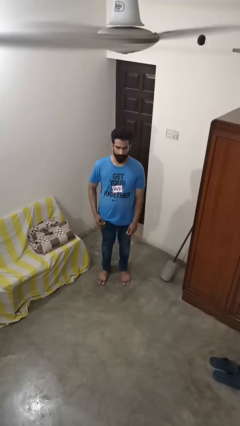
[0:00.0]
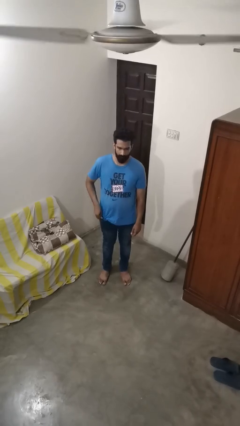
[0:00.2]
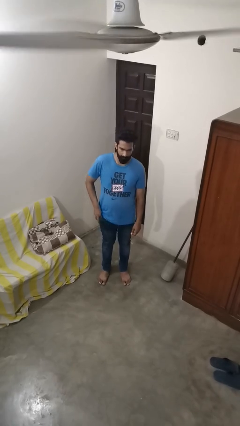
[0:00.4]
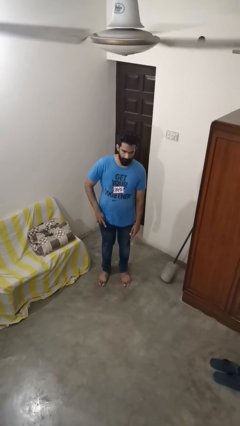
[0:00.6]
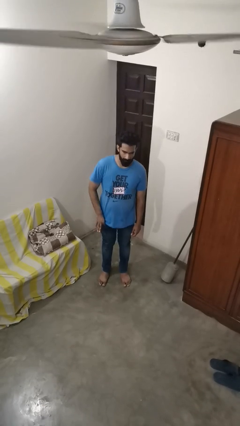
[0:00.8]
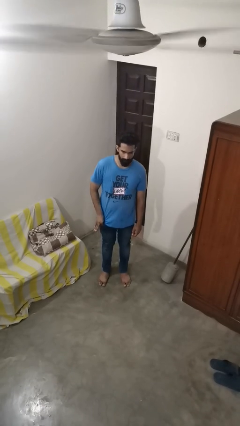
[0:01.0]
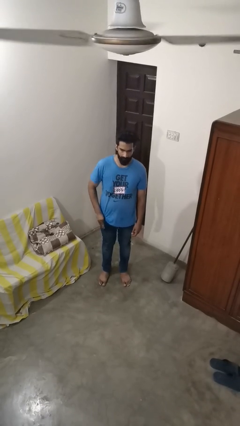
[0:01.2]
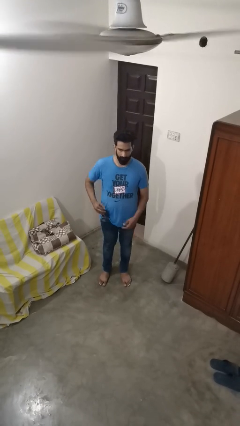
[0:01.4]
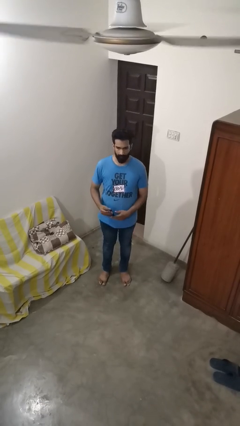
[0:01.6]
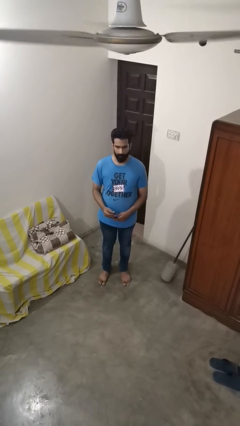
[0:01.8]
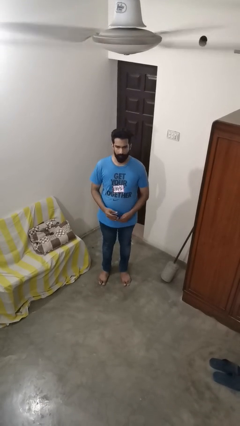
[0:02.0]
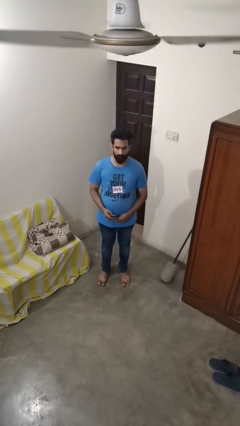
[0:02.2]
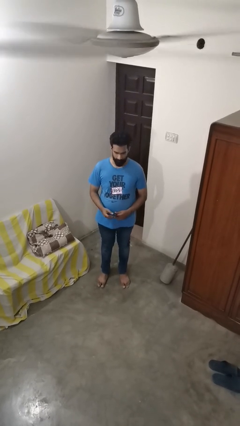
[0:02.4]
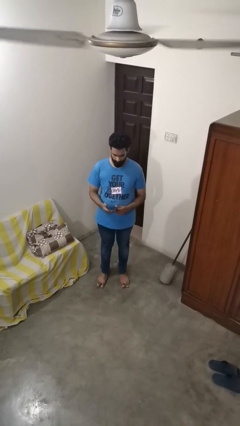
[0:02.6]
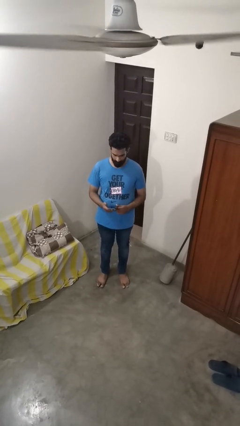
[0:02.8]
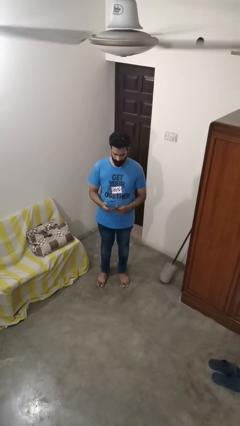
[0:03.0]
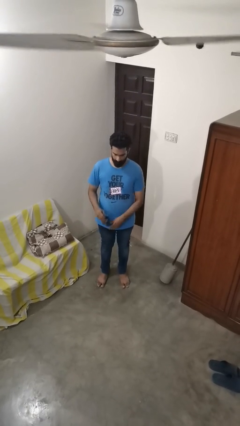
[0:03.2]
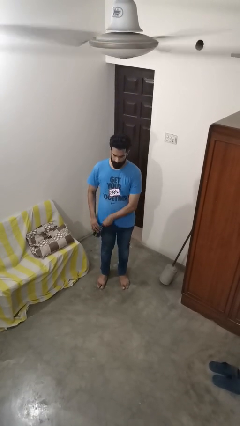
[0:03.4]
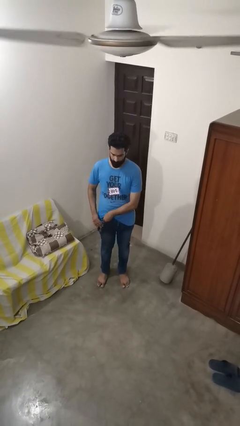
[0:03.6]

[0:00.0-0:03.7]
person takes phone from pocket

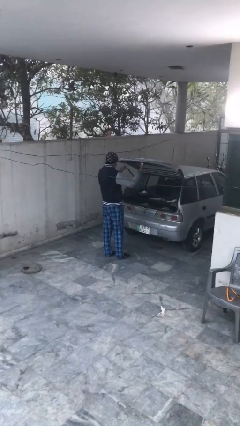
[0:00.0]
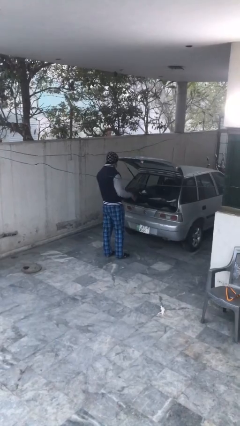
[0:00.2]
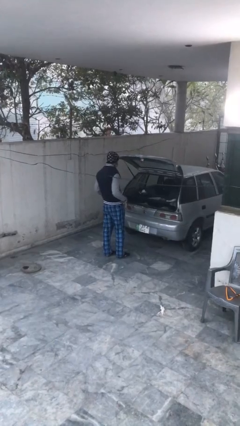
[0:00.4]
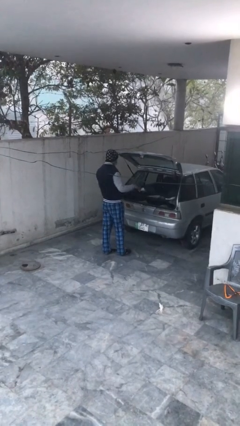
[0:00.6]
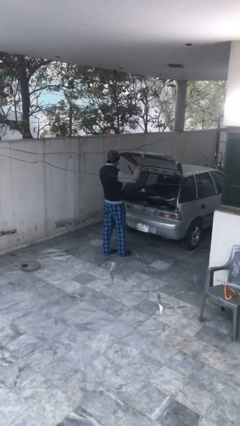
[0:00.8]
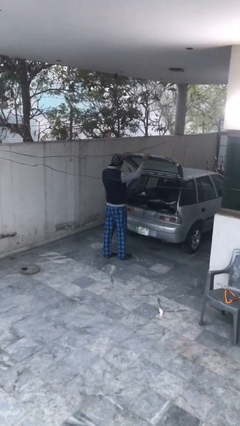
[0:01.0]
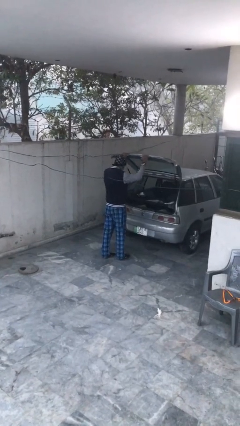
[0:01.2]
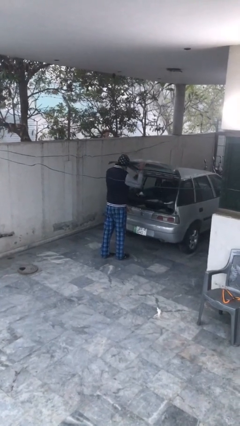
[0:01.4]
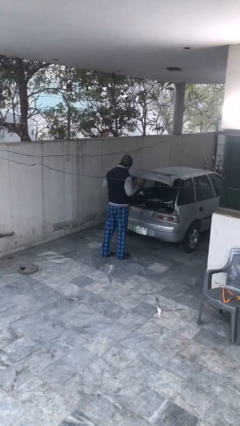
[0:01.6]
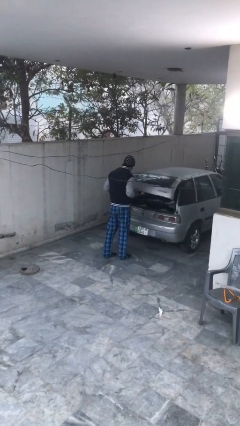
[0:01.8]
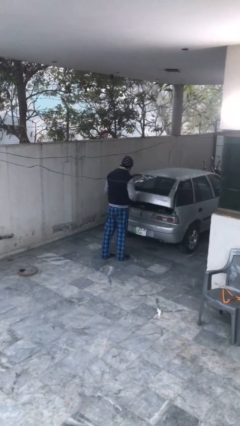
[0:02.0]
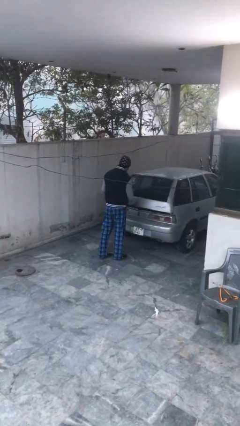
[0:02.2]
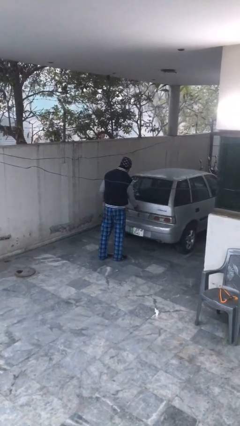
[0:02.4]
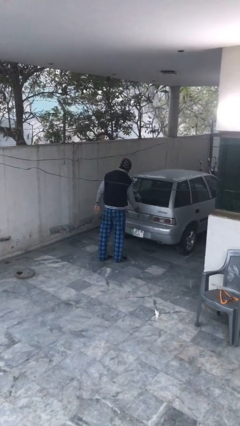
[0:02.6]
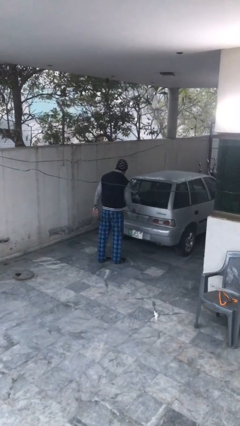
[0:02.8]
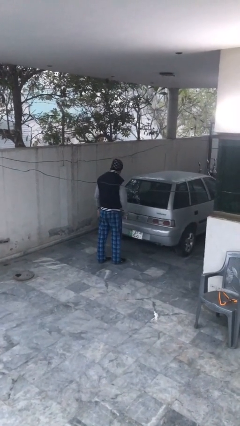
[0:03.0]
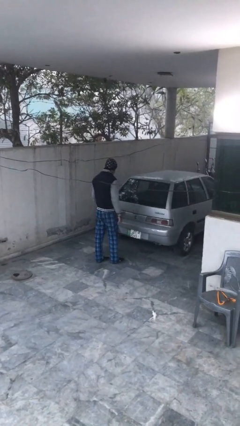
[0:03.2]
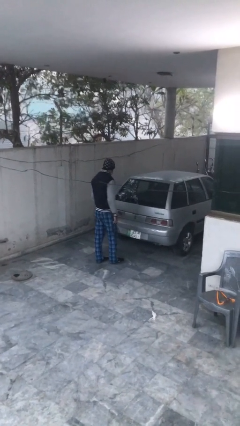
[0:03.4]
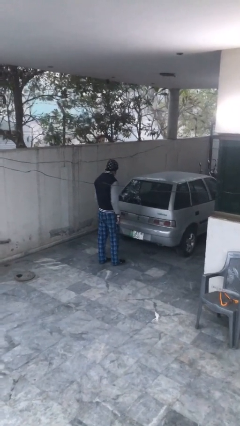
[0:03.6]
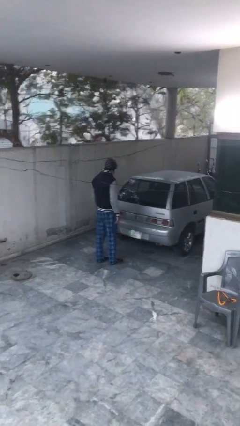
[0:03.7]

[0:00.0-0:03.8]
person closes car trunk

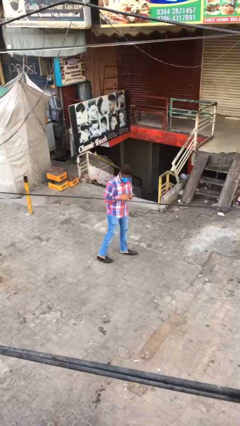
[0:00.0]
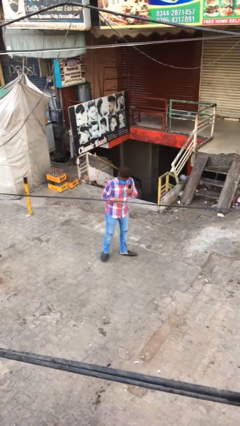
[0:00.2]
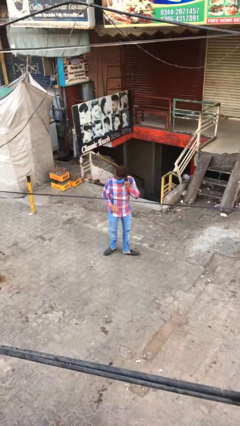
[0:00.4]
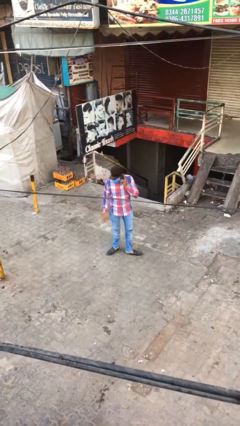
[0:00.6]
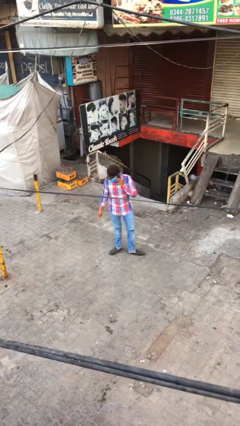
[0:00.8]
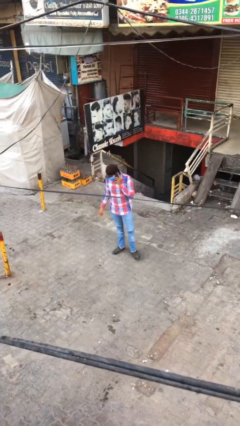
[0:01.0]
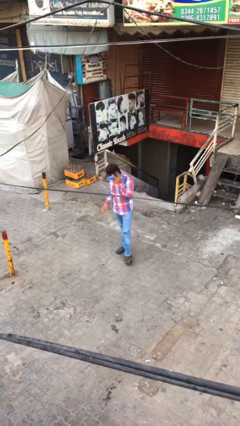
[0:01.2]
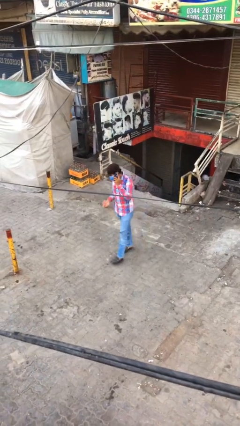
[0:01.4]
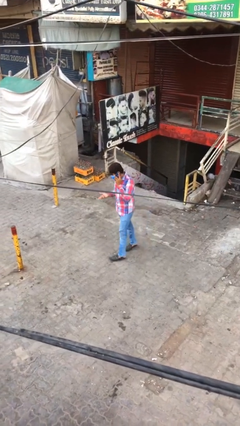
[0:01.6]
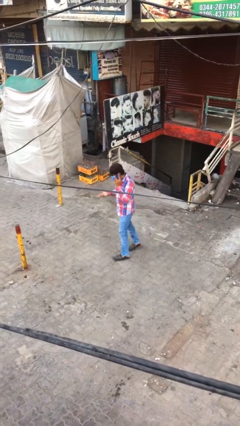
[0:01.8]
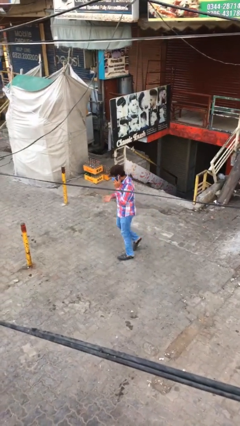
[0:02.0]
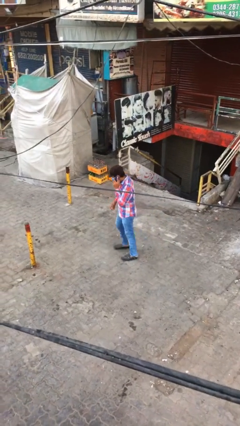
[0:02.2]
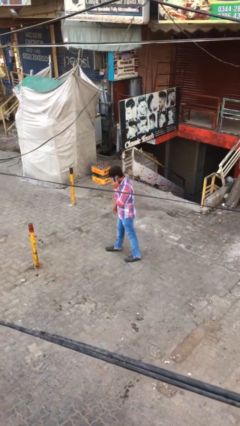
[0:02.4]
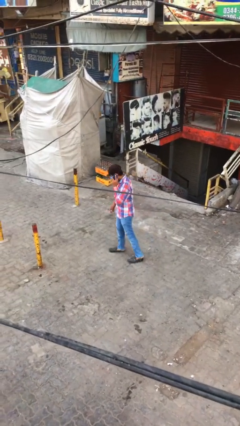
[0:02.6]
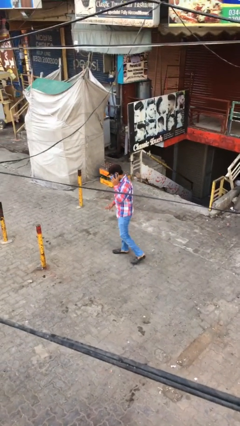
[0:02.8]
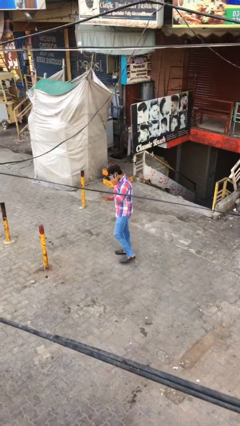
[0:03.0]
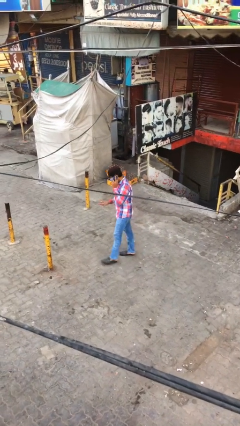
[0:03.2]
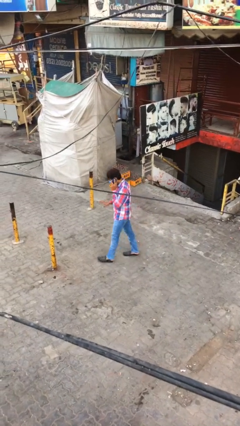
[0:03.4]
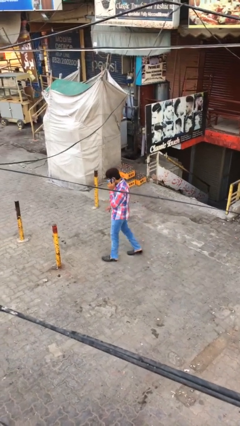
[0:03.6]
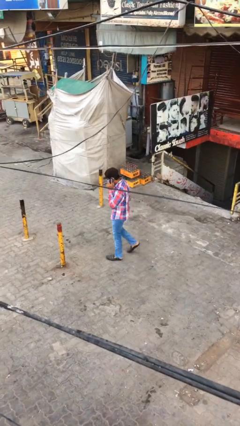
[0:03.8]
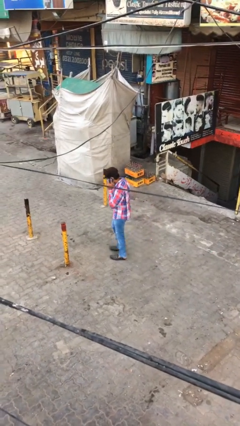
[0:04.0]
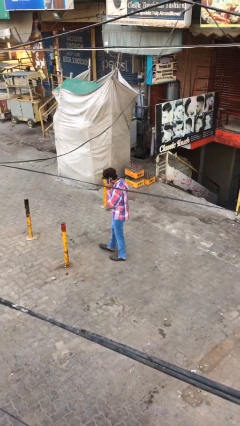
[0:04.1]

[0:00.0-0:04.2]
person talks on phone

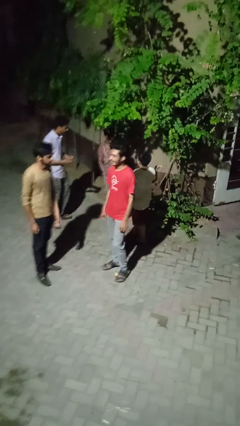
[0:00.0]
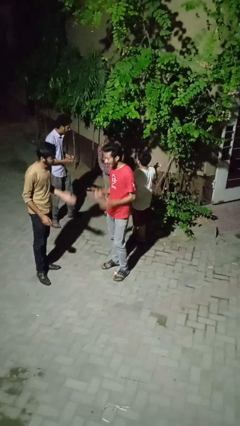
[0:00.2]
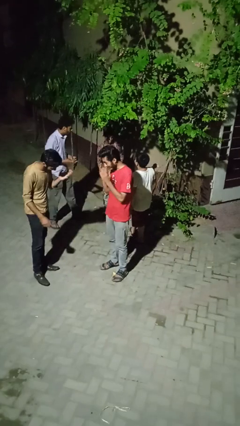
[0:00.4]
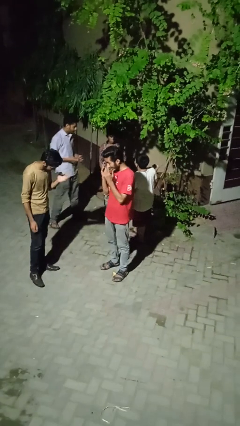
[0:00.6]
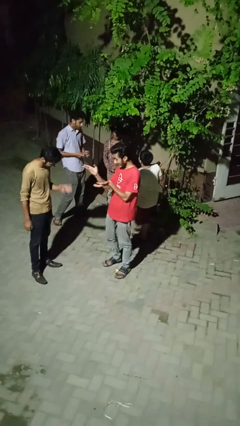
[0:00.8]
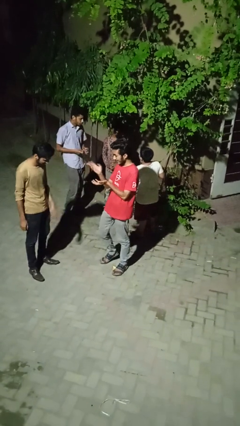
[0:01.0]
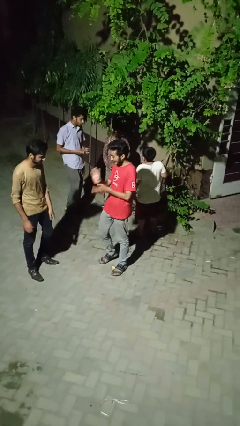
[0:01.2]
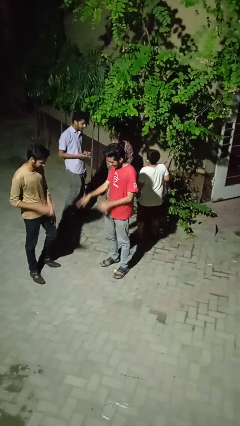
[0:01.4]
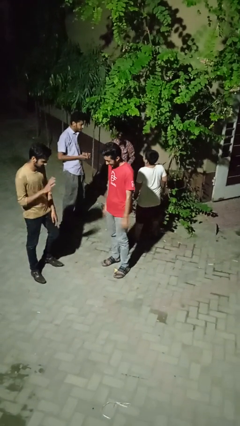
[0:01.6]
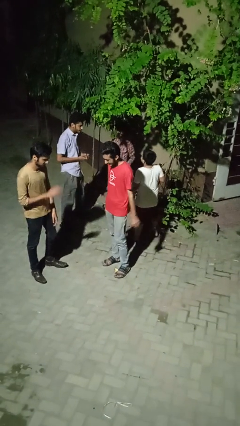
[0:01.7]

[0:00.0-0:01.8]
person laughs with person

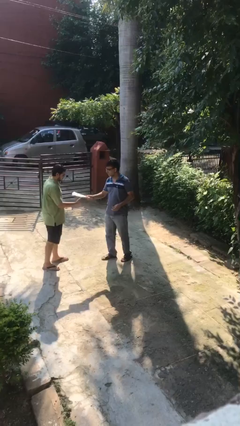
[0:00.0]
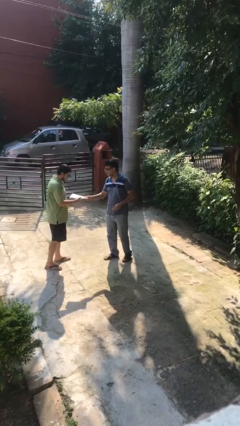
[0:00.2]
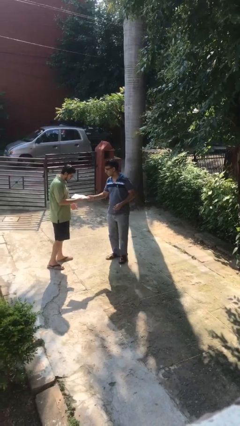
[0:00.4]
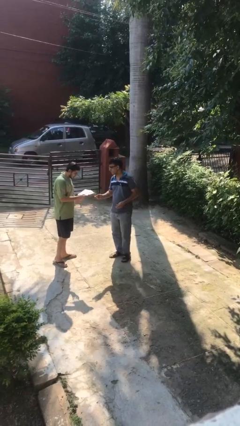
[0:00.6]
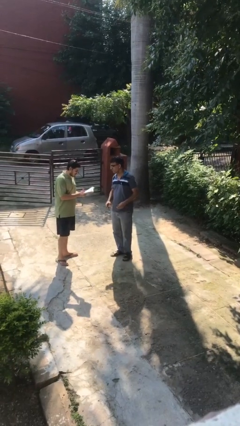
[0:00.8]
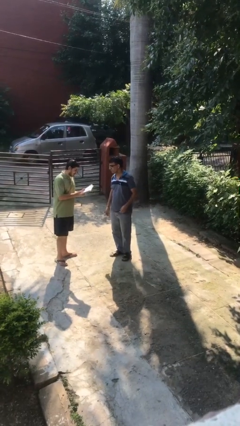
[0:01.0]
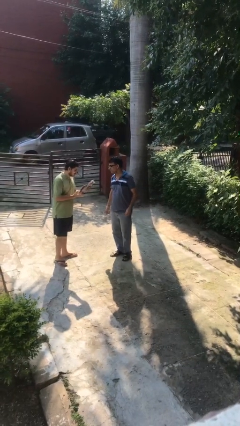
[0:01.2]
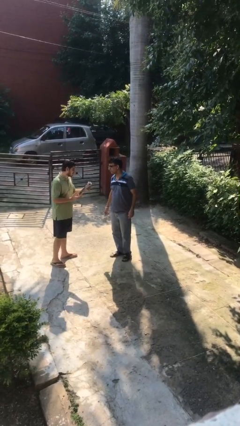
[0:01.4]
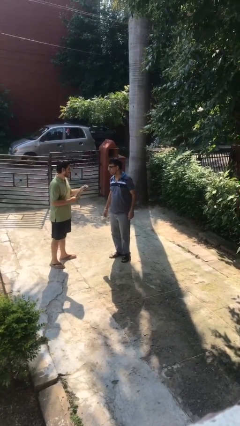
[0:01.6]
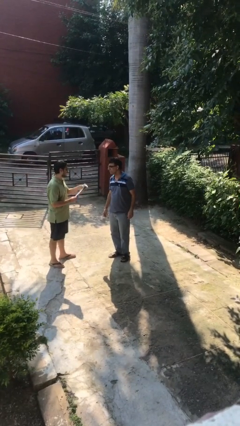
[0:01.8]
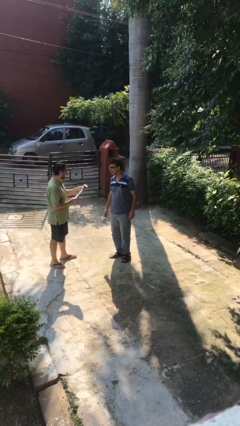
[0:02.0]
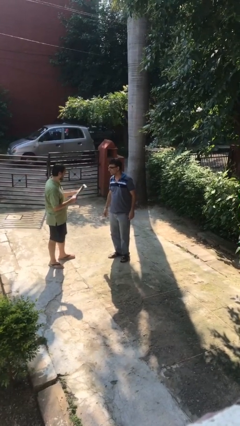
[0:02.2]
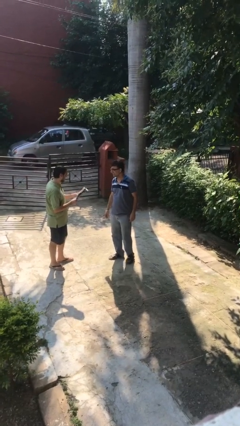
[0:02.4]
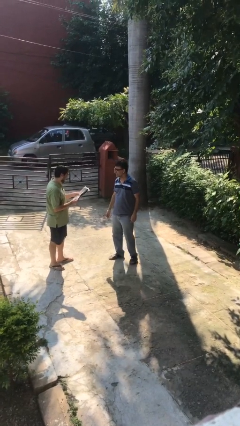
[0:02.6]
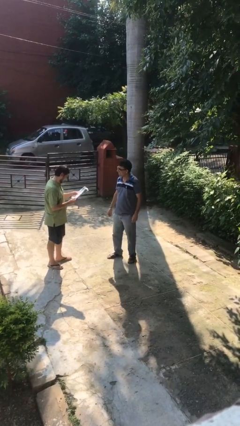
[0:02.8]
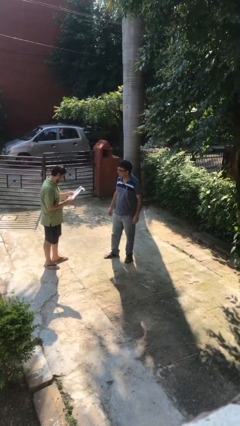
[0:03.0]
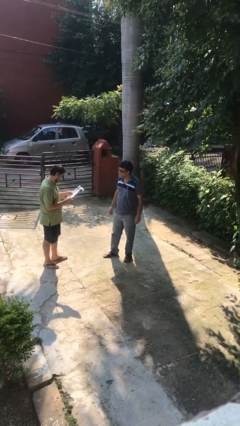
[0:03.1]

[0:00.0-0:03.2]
person transfers object to person

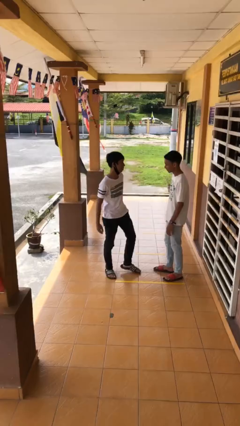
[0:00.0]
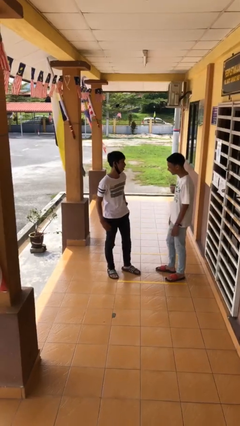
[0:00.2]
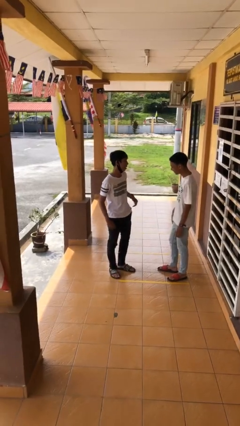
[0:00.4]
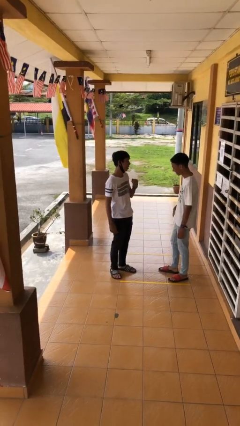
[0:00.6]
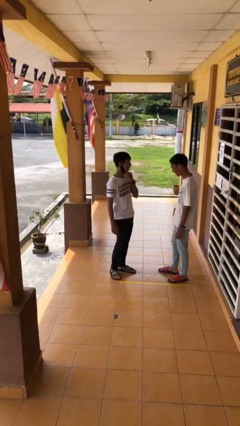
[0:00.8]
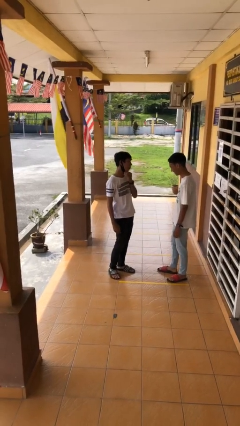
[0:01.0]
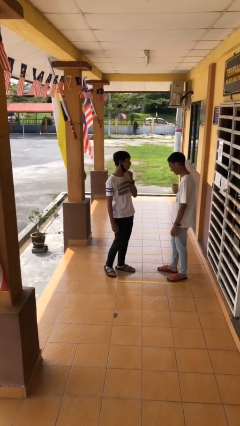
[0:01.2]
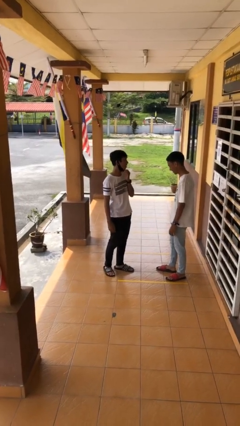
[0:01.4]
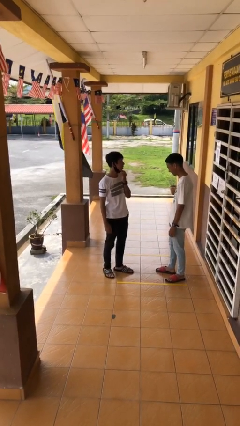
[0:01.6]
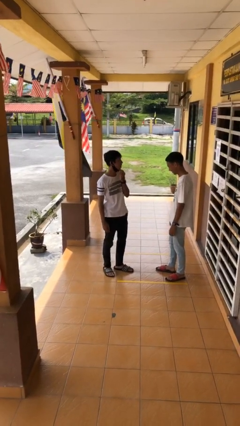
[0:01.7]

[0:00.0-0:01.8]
person talks to person
